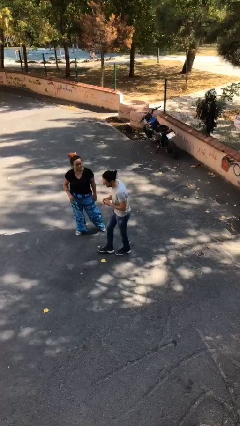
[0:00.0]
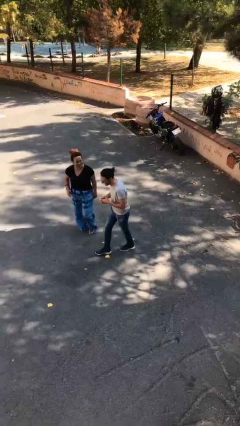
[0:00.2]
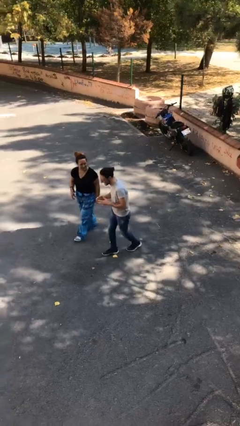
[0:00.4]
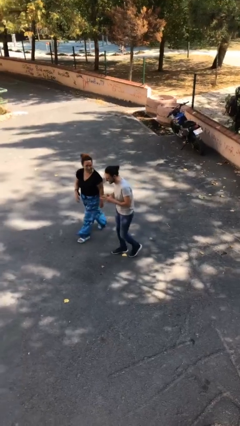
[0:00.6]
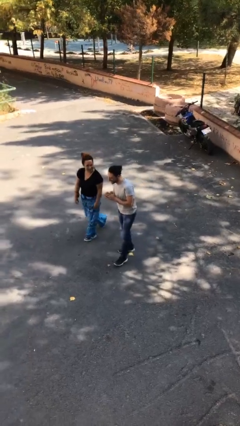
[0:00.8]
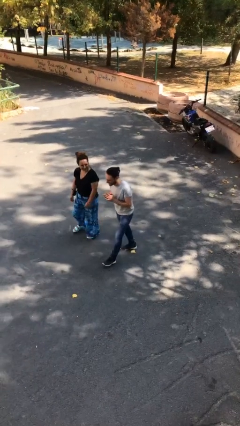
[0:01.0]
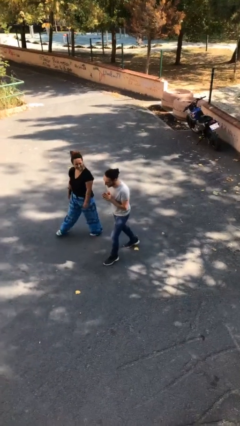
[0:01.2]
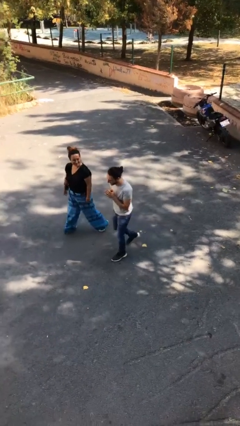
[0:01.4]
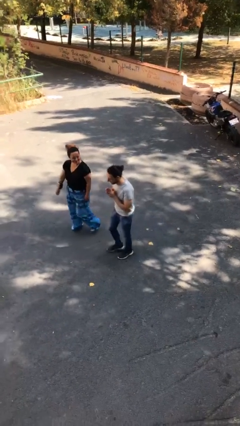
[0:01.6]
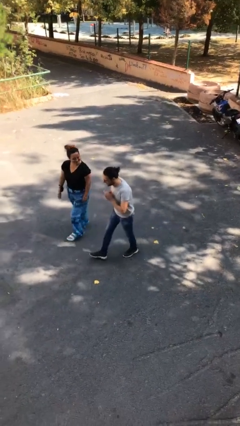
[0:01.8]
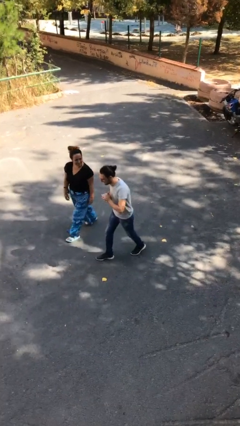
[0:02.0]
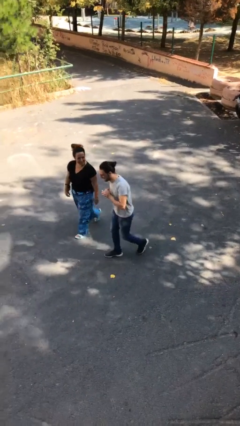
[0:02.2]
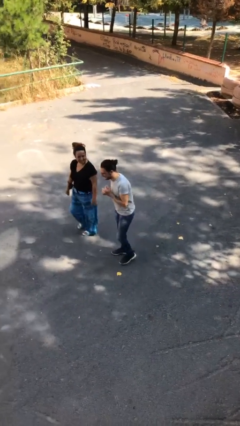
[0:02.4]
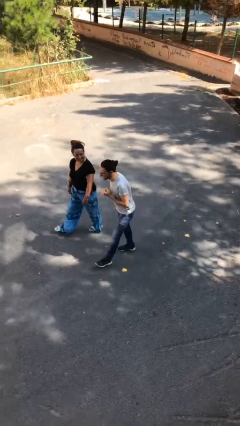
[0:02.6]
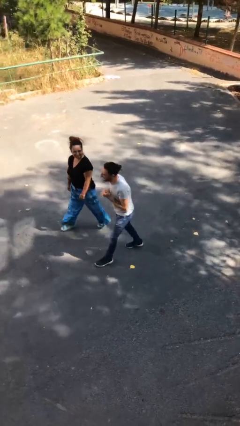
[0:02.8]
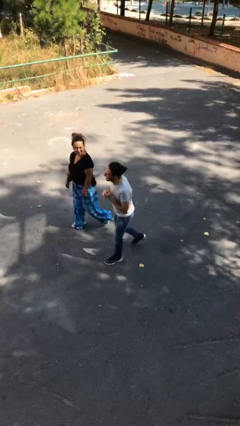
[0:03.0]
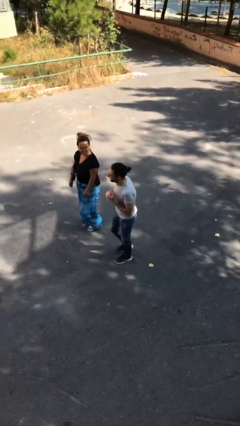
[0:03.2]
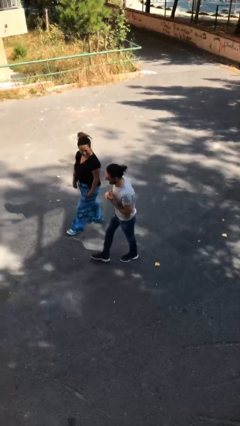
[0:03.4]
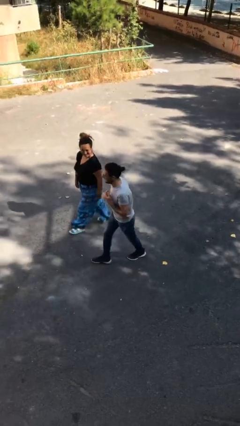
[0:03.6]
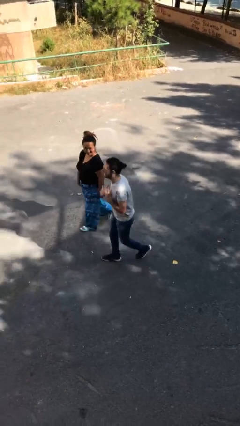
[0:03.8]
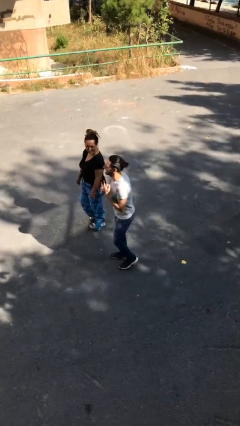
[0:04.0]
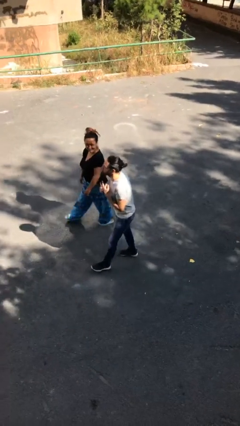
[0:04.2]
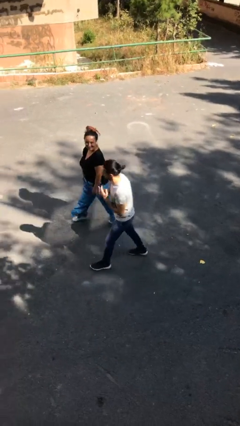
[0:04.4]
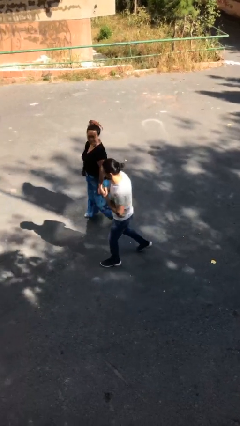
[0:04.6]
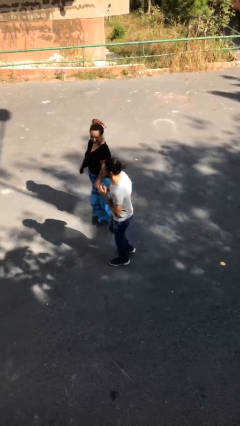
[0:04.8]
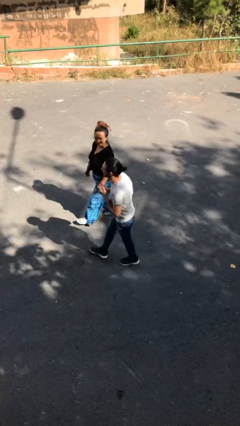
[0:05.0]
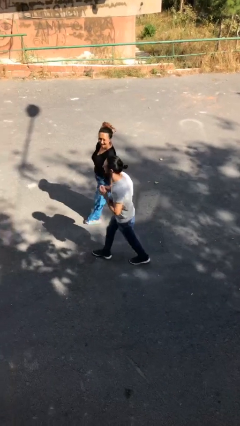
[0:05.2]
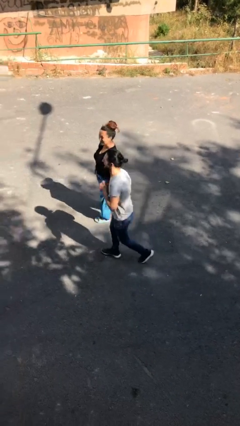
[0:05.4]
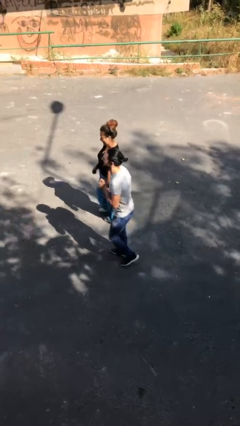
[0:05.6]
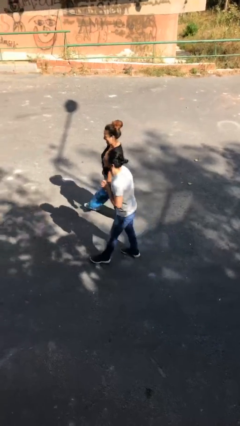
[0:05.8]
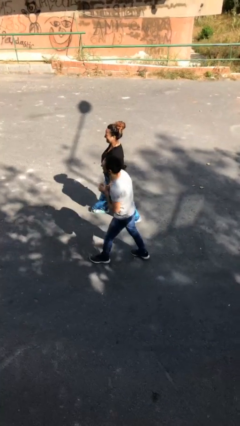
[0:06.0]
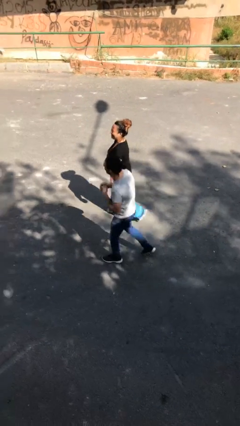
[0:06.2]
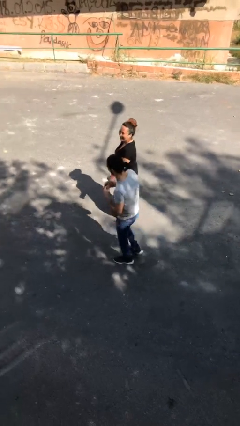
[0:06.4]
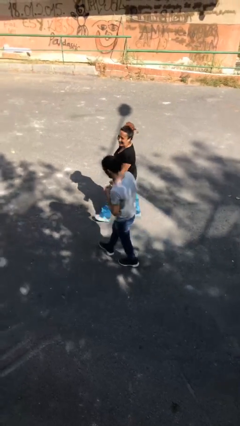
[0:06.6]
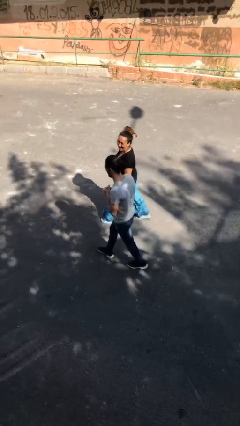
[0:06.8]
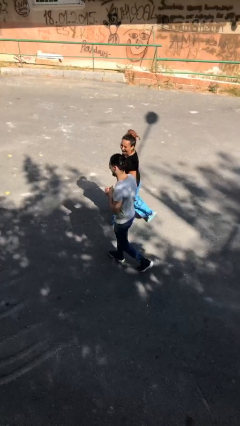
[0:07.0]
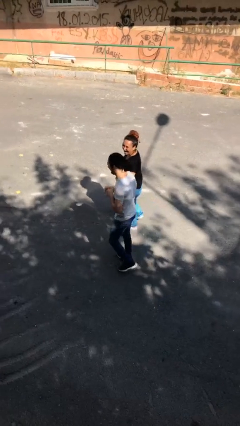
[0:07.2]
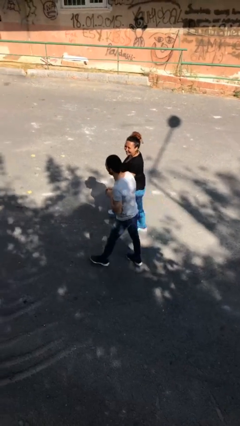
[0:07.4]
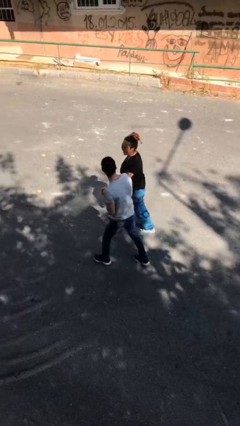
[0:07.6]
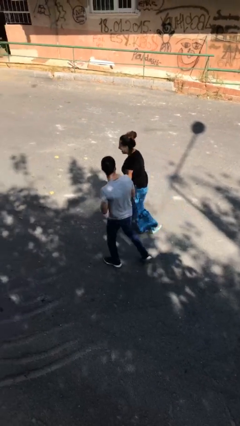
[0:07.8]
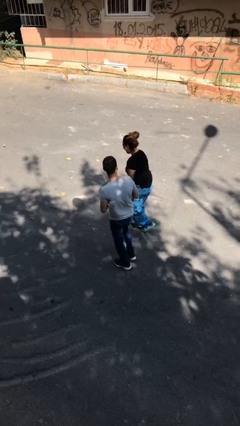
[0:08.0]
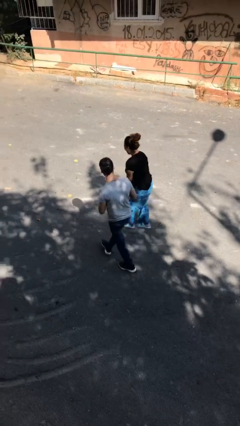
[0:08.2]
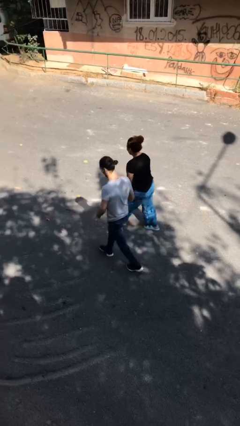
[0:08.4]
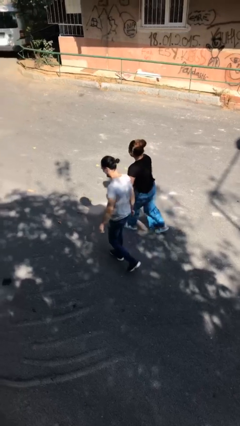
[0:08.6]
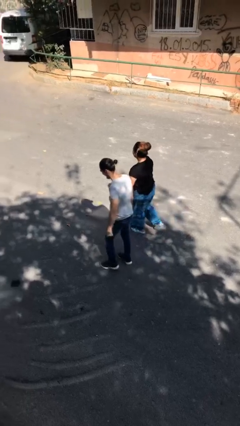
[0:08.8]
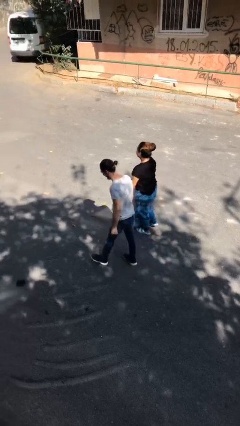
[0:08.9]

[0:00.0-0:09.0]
person talks to person

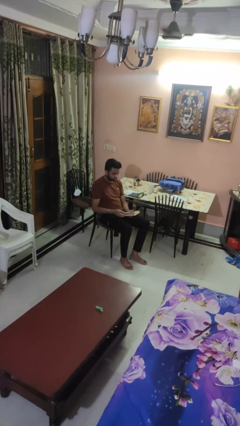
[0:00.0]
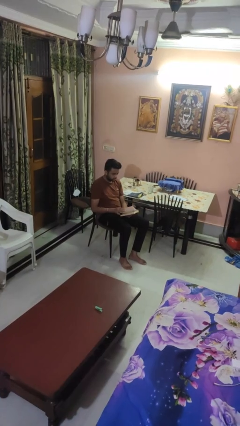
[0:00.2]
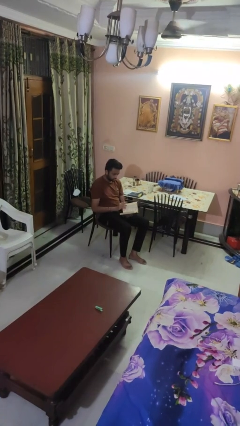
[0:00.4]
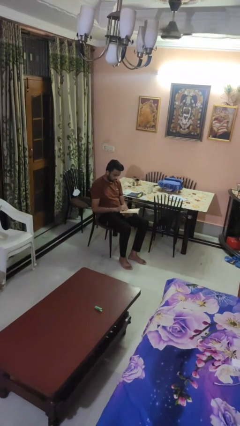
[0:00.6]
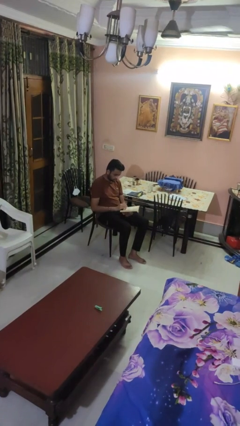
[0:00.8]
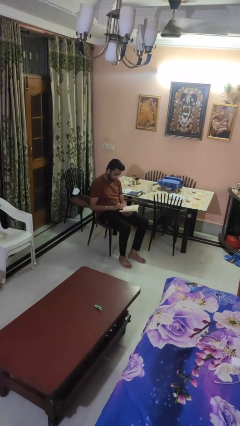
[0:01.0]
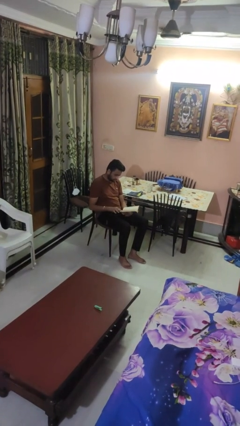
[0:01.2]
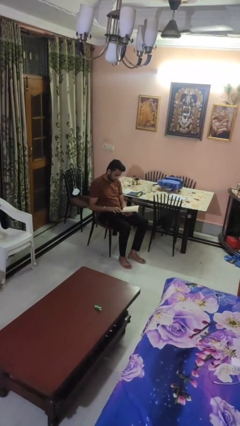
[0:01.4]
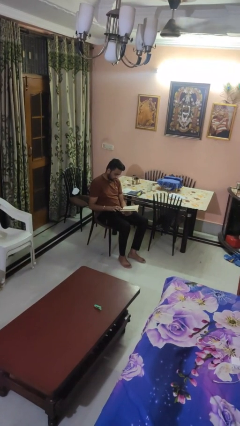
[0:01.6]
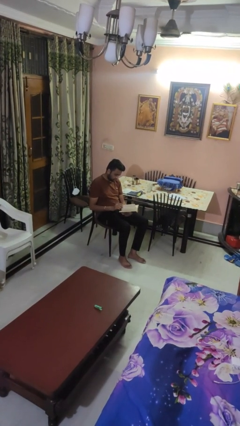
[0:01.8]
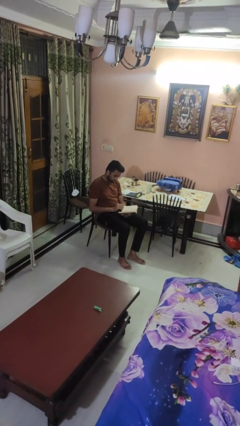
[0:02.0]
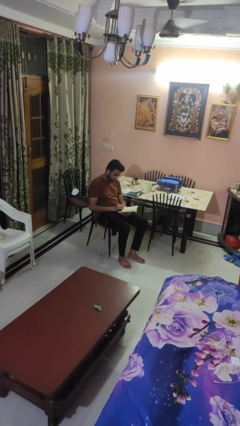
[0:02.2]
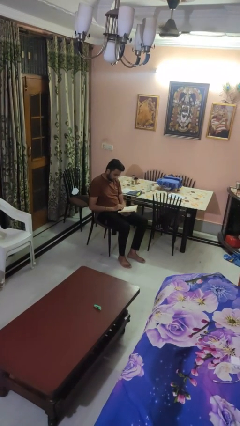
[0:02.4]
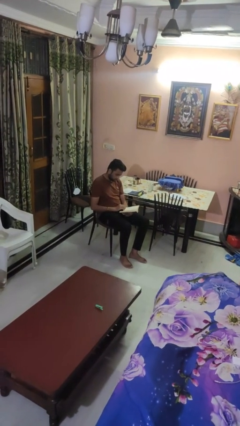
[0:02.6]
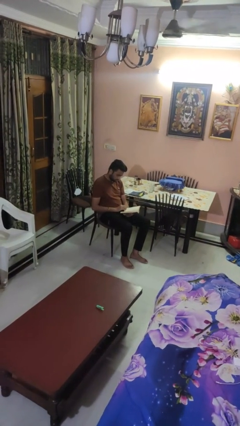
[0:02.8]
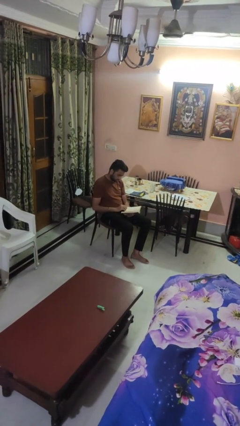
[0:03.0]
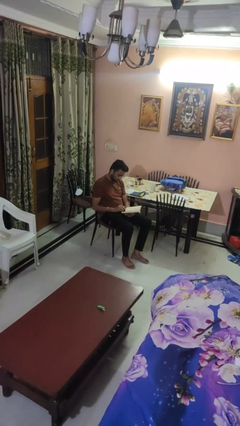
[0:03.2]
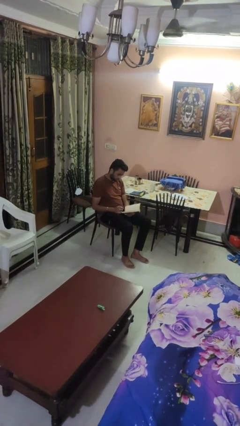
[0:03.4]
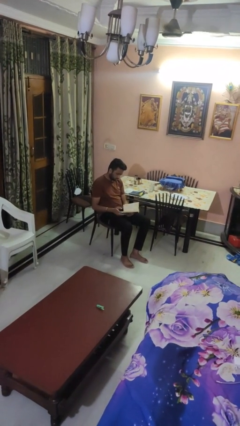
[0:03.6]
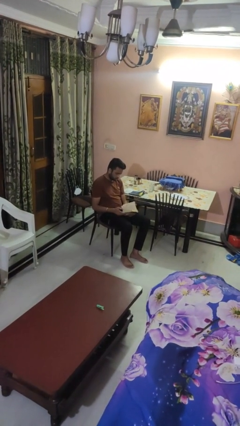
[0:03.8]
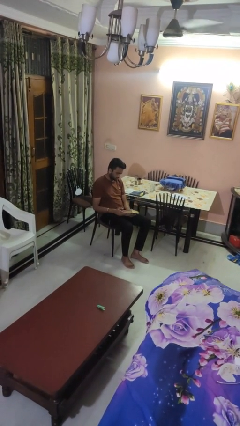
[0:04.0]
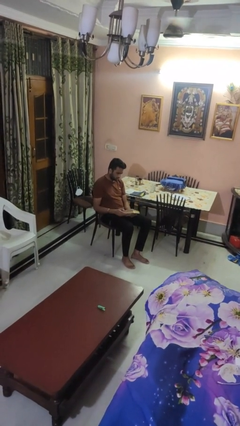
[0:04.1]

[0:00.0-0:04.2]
person reads book

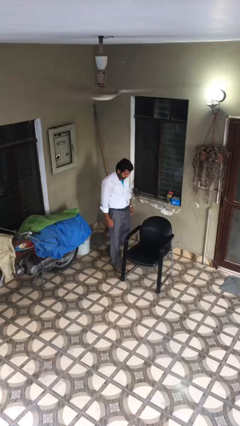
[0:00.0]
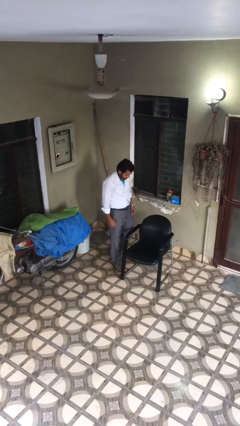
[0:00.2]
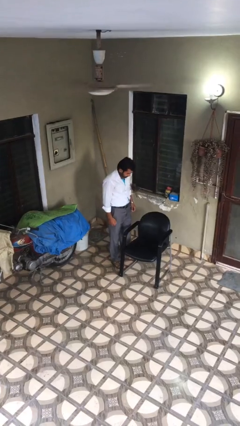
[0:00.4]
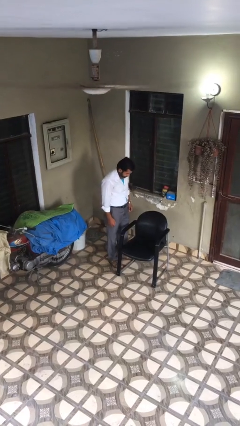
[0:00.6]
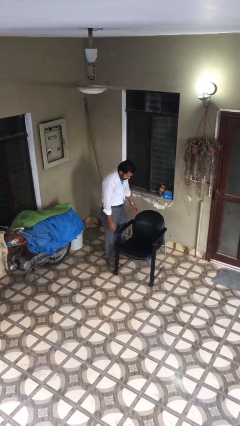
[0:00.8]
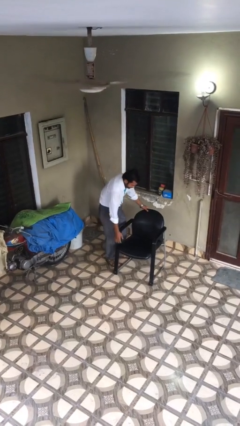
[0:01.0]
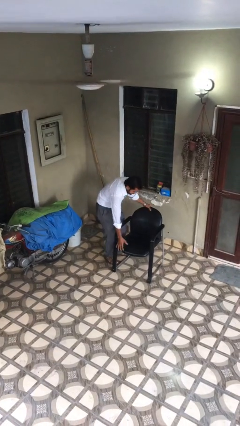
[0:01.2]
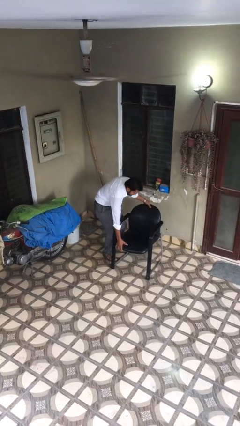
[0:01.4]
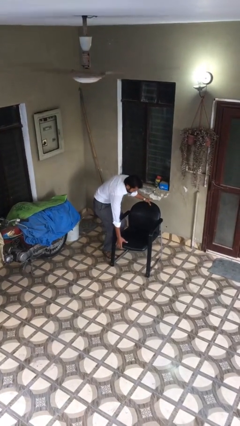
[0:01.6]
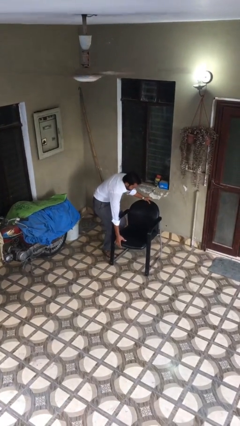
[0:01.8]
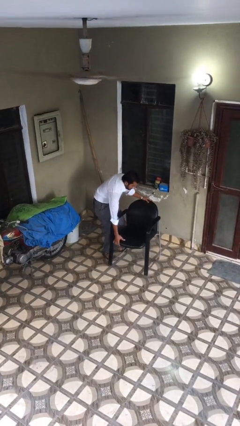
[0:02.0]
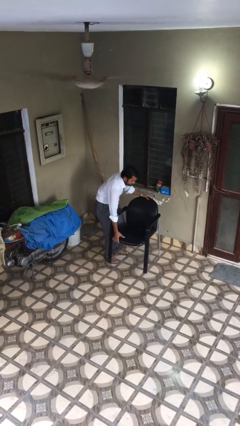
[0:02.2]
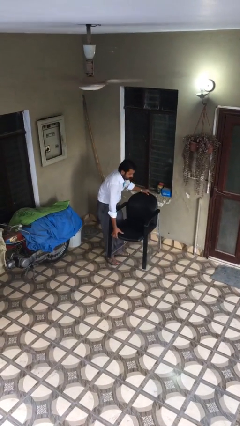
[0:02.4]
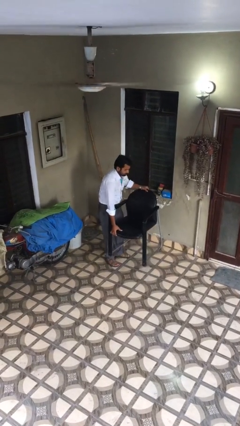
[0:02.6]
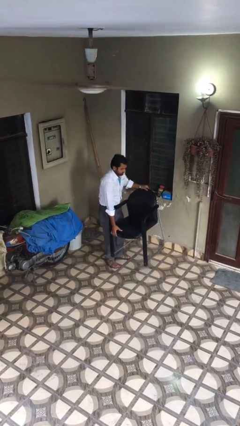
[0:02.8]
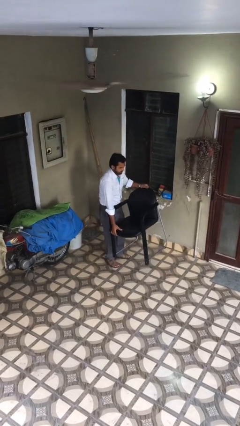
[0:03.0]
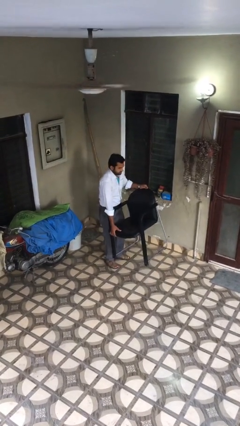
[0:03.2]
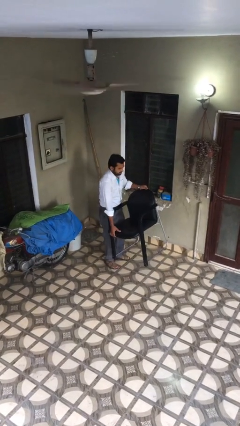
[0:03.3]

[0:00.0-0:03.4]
person picks up object from floor

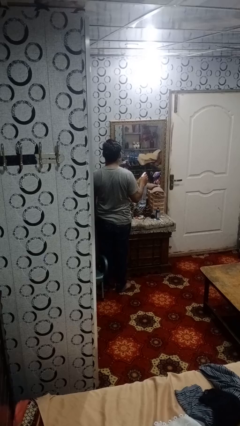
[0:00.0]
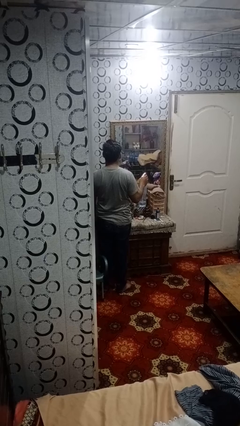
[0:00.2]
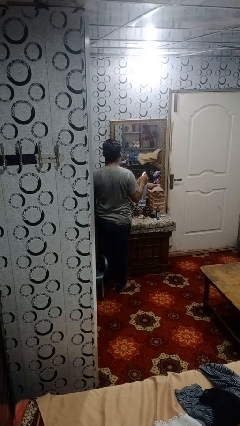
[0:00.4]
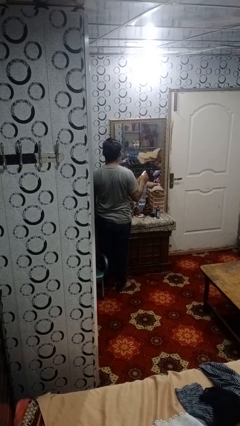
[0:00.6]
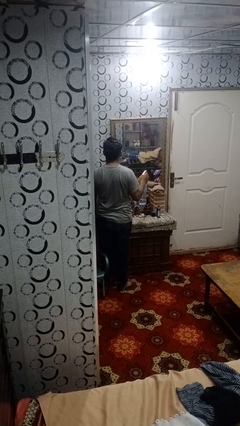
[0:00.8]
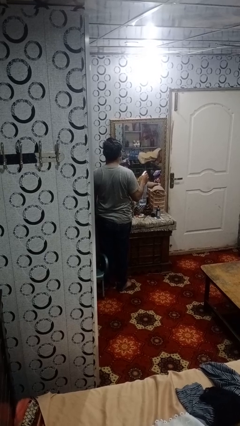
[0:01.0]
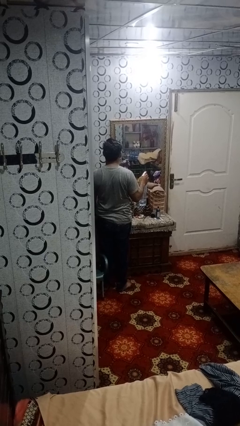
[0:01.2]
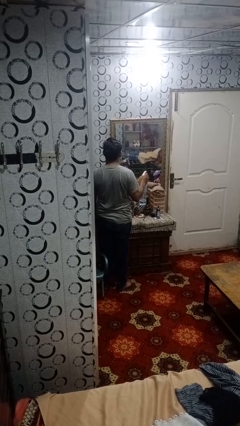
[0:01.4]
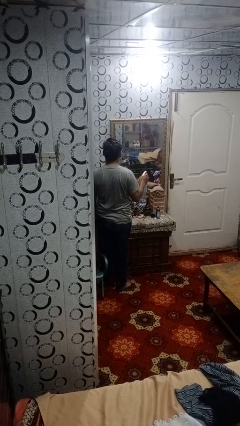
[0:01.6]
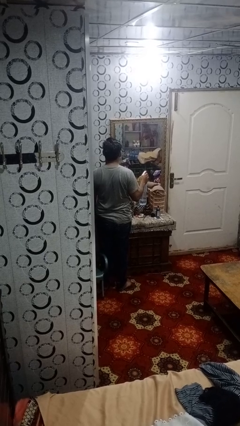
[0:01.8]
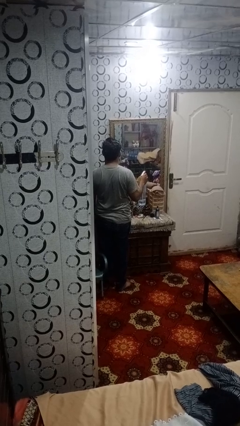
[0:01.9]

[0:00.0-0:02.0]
person sprays from bottle
